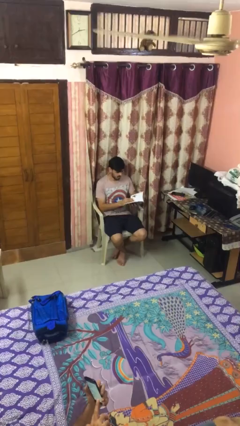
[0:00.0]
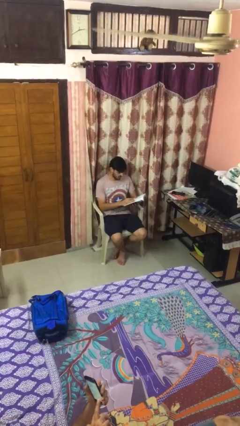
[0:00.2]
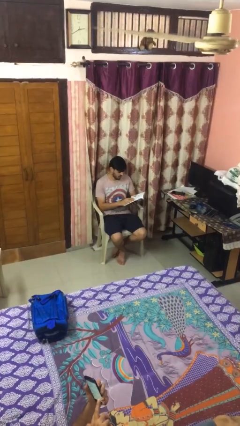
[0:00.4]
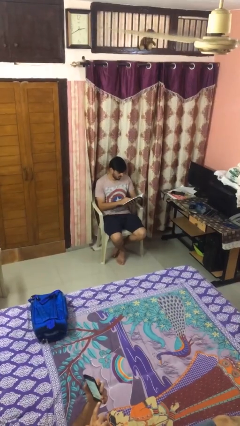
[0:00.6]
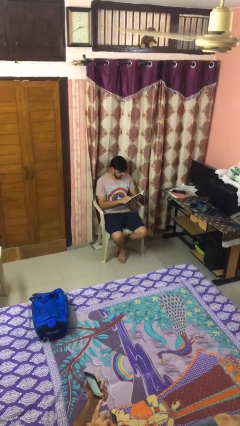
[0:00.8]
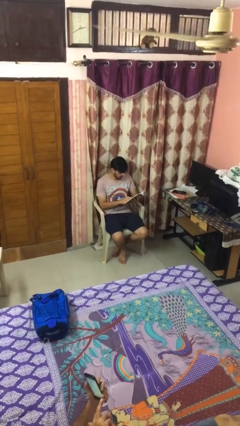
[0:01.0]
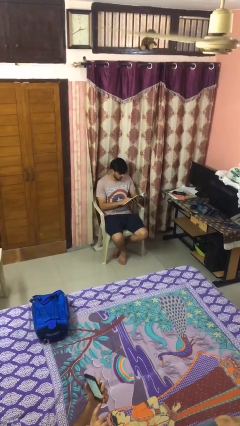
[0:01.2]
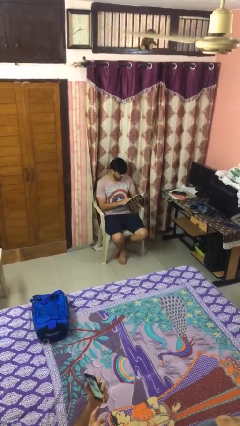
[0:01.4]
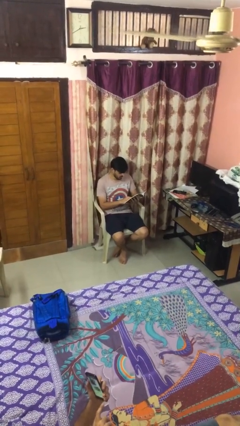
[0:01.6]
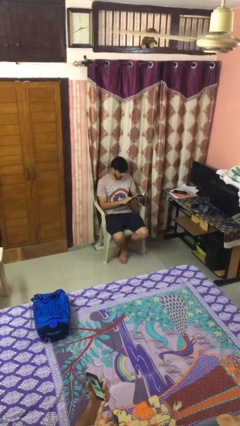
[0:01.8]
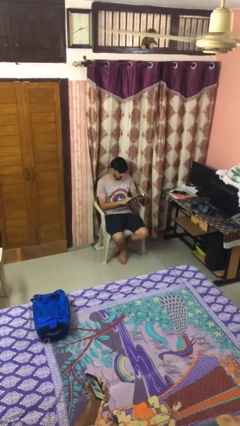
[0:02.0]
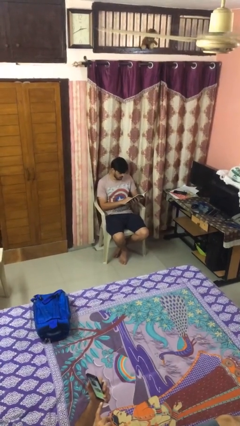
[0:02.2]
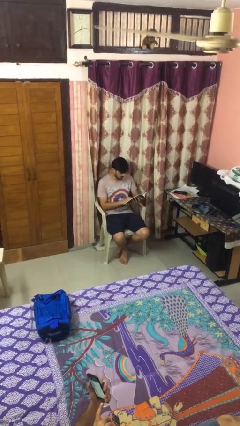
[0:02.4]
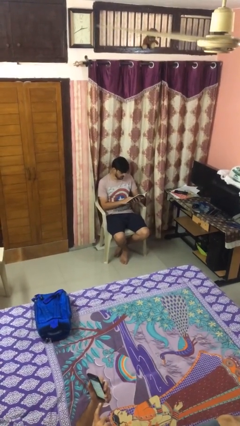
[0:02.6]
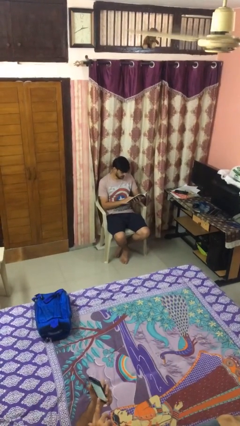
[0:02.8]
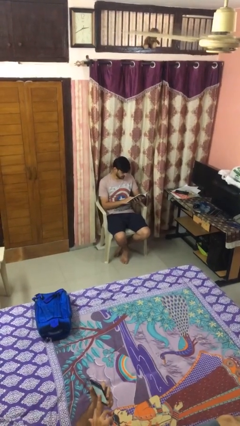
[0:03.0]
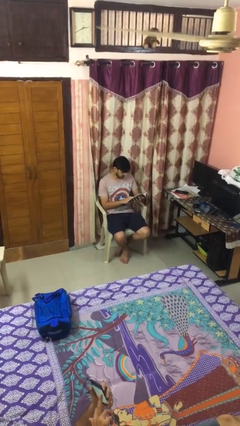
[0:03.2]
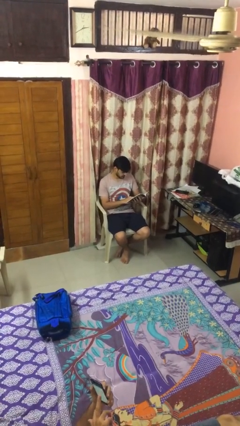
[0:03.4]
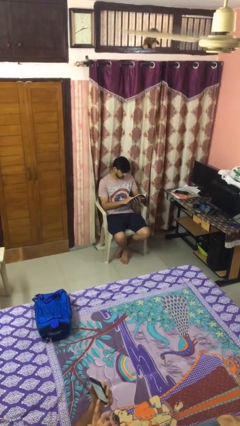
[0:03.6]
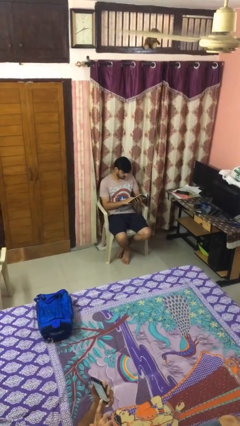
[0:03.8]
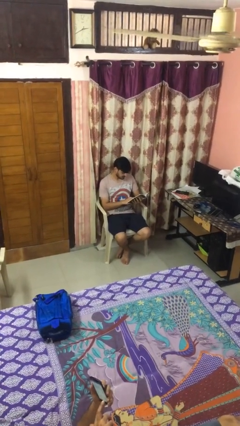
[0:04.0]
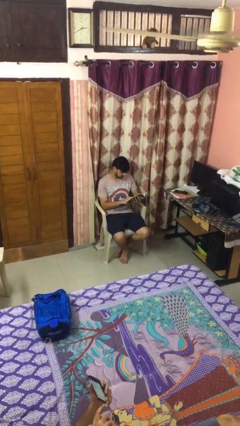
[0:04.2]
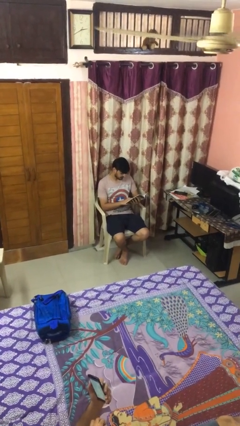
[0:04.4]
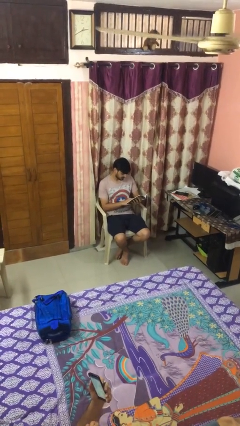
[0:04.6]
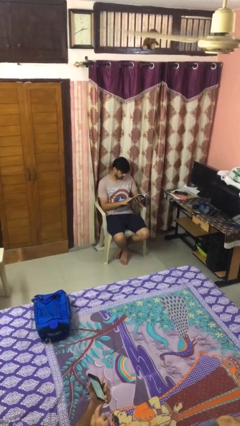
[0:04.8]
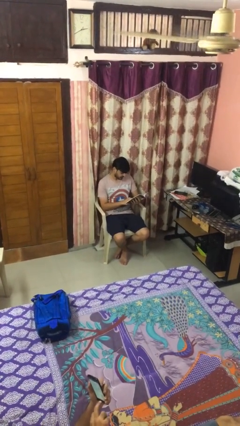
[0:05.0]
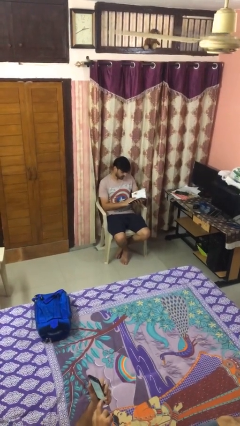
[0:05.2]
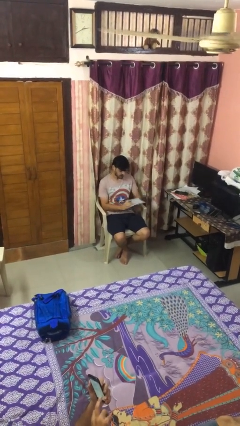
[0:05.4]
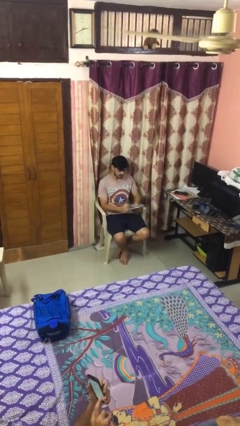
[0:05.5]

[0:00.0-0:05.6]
person reads book

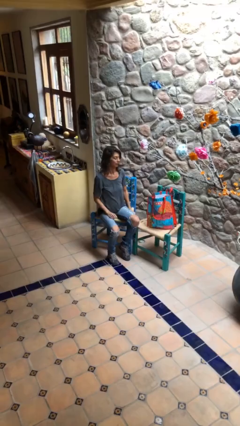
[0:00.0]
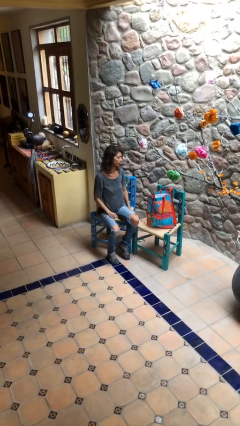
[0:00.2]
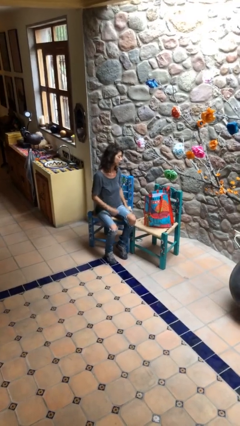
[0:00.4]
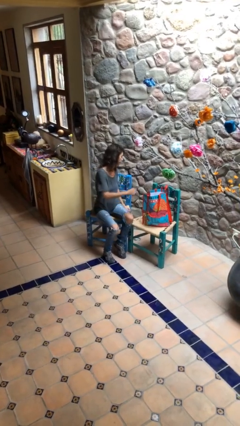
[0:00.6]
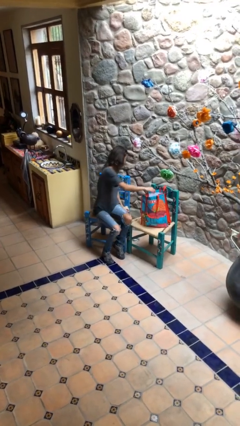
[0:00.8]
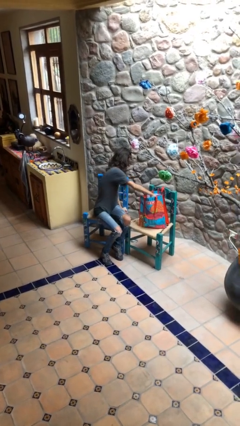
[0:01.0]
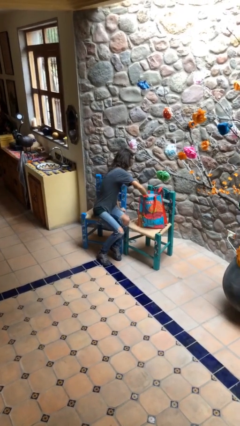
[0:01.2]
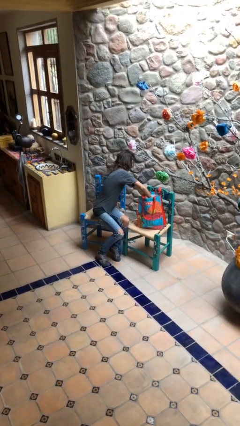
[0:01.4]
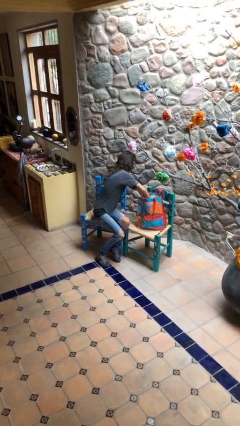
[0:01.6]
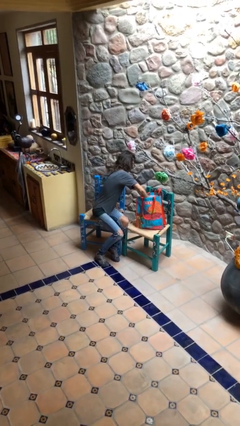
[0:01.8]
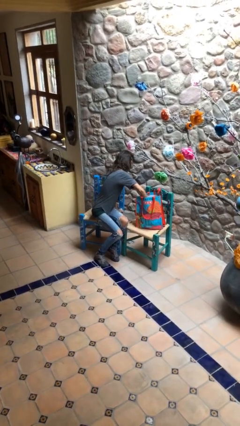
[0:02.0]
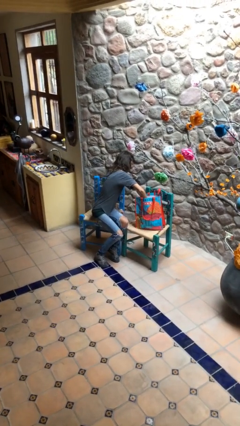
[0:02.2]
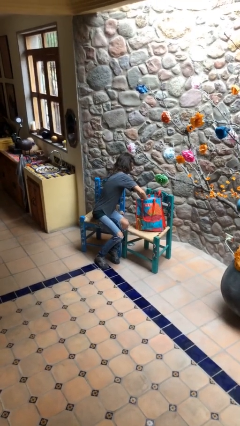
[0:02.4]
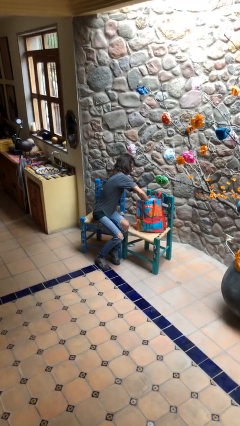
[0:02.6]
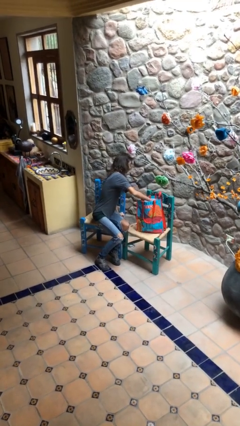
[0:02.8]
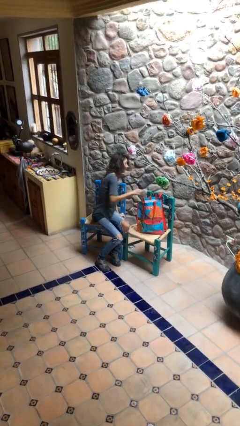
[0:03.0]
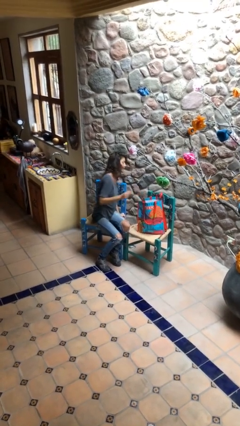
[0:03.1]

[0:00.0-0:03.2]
person searches in bag

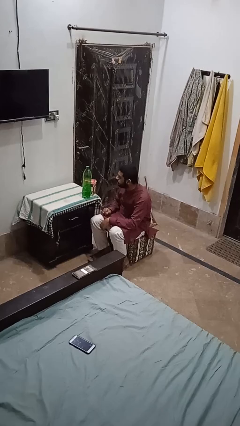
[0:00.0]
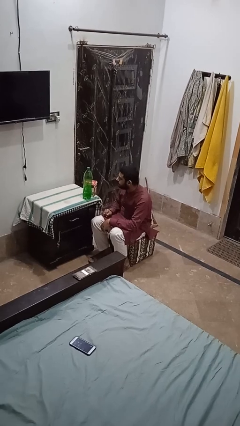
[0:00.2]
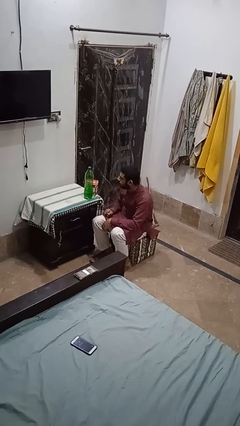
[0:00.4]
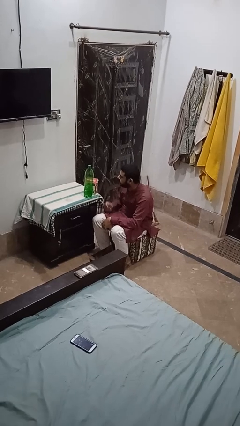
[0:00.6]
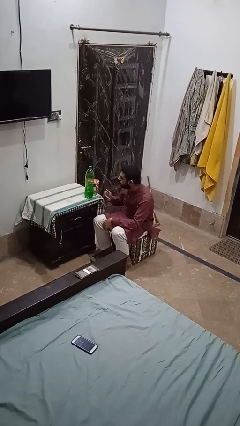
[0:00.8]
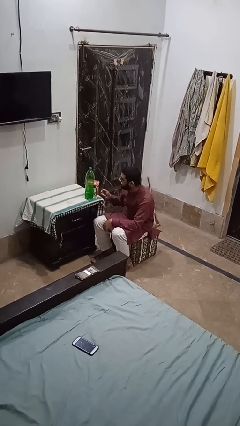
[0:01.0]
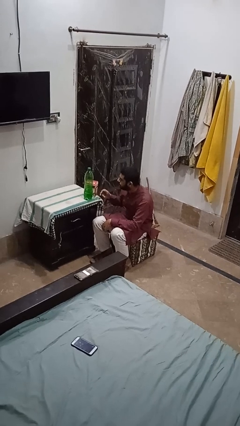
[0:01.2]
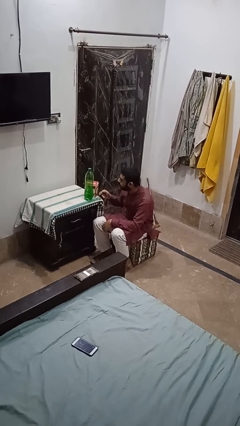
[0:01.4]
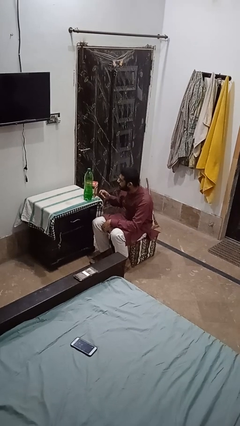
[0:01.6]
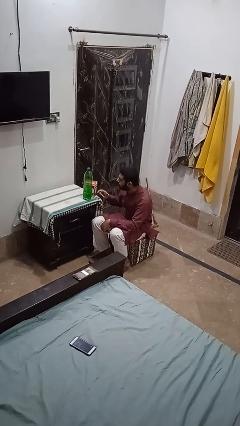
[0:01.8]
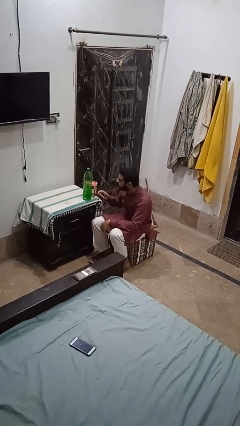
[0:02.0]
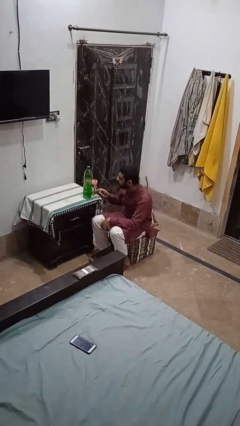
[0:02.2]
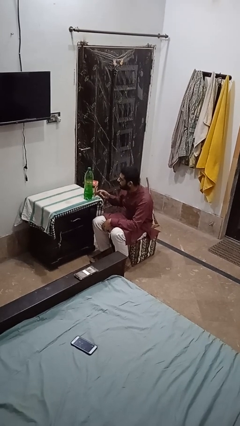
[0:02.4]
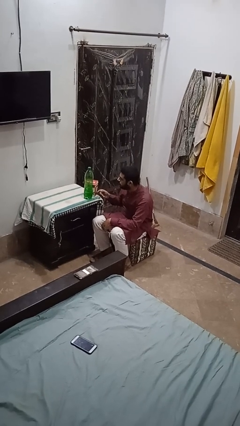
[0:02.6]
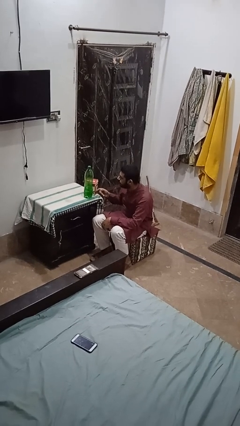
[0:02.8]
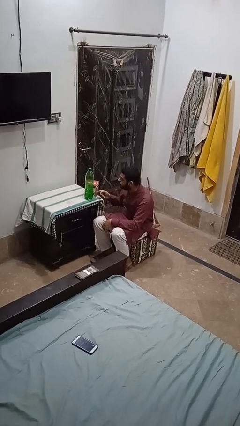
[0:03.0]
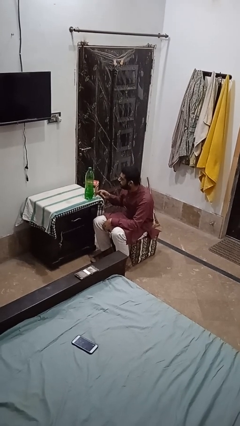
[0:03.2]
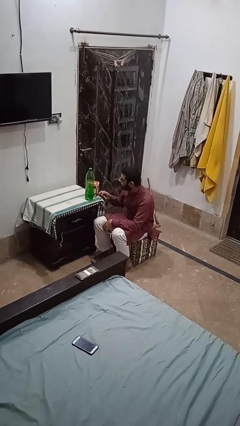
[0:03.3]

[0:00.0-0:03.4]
person taps object with finger

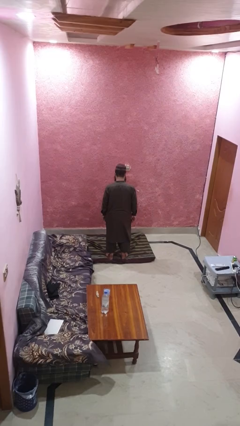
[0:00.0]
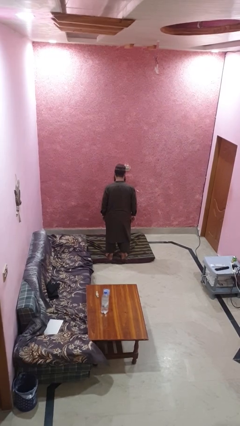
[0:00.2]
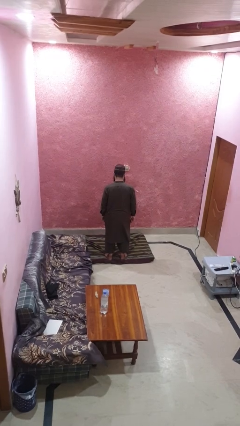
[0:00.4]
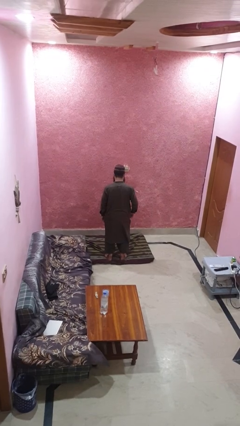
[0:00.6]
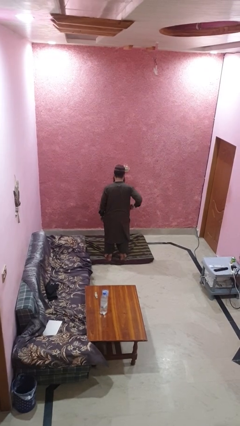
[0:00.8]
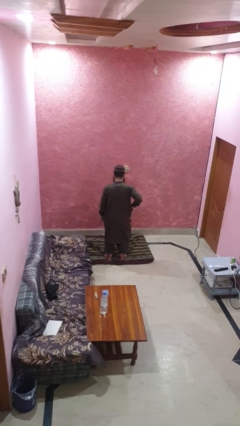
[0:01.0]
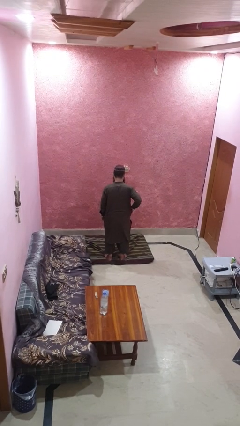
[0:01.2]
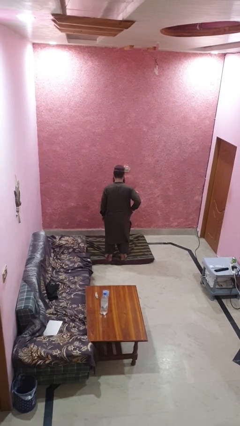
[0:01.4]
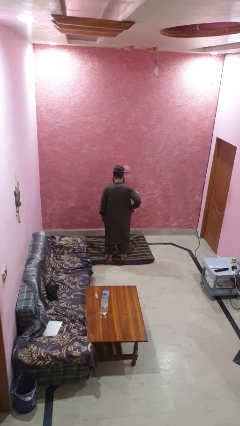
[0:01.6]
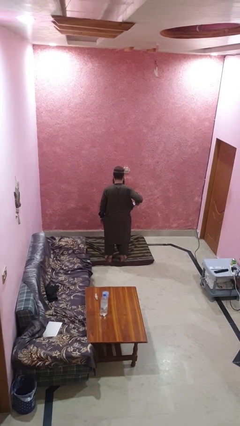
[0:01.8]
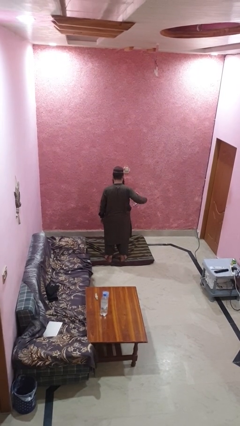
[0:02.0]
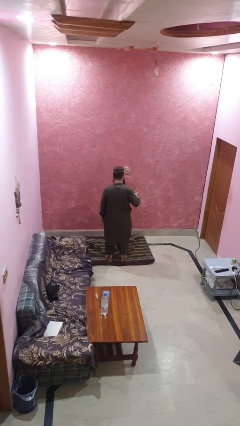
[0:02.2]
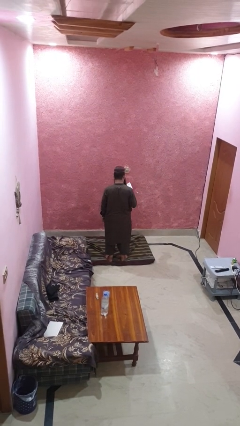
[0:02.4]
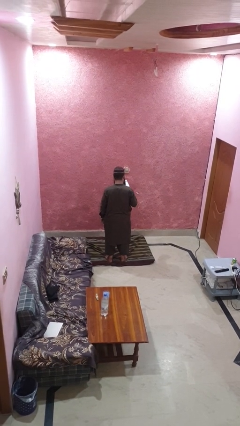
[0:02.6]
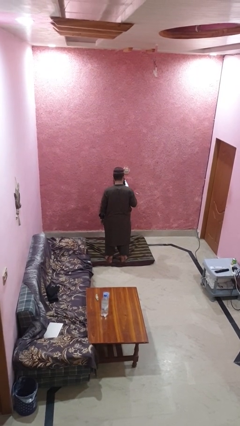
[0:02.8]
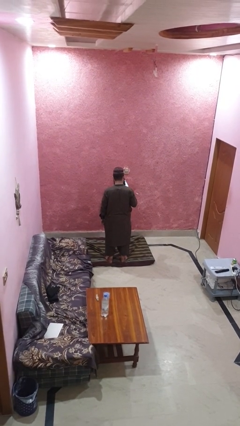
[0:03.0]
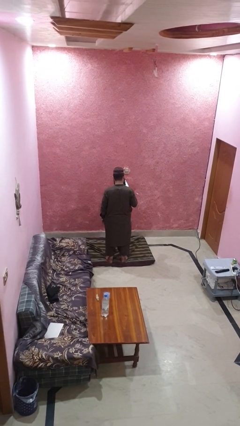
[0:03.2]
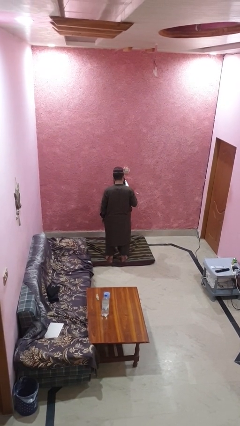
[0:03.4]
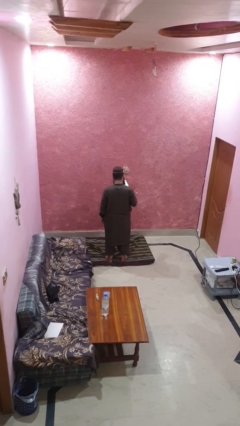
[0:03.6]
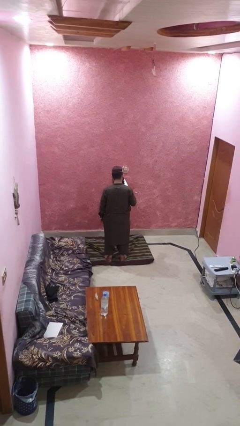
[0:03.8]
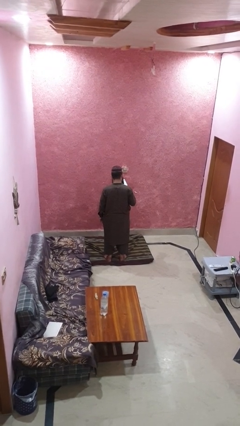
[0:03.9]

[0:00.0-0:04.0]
person takes phone from pocket

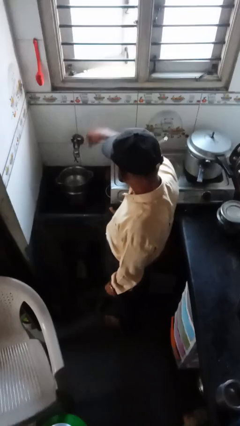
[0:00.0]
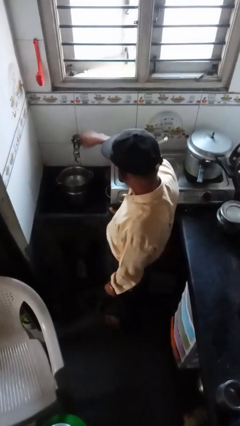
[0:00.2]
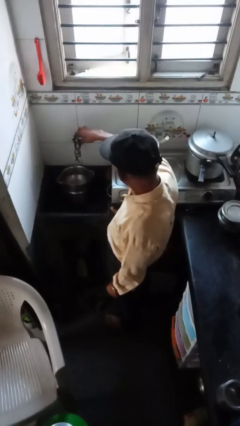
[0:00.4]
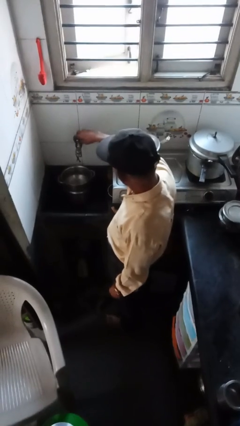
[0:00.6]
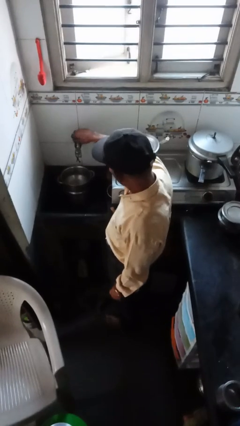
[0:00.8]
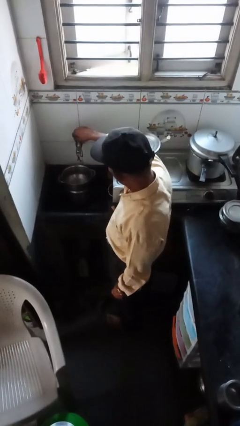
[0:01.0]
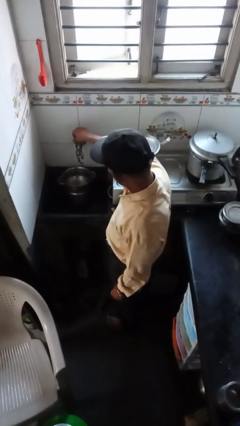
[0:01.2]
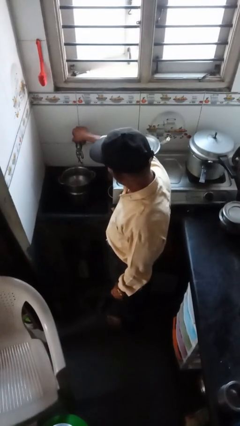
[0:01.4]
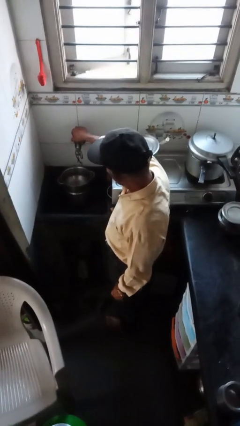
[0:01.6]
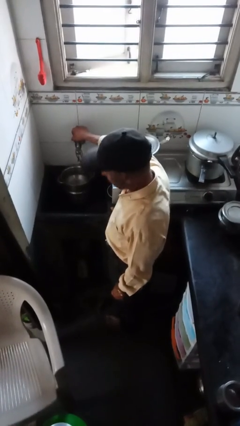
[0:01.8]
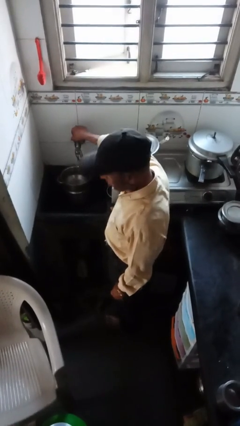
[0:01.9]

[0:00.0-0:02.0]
person turns off faucet
